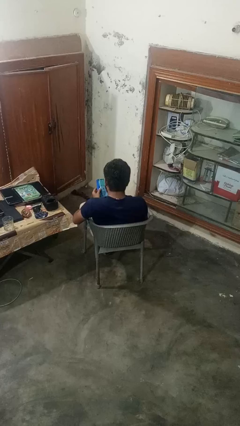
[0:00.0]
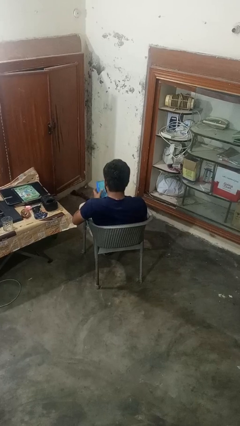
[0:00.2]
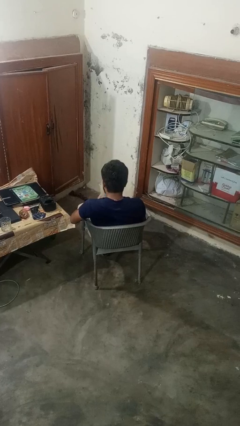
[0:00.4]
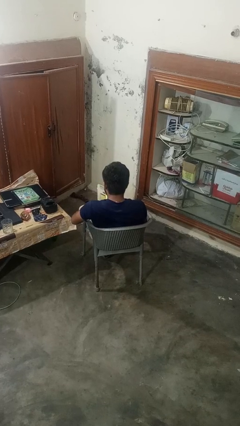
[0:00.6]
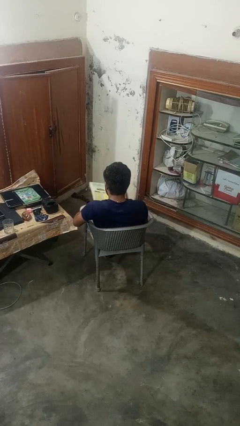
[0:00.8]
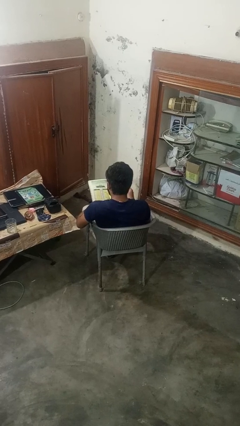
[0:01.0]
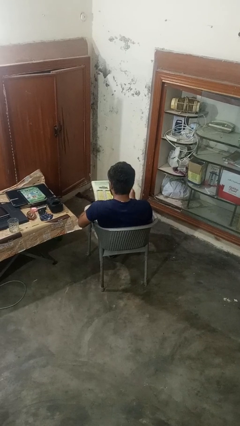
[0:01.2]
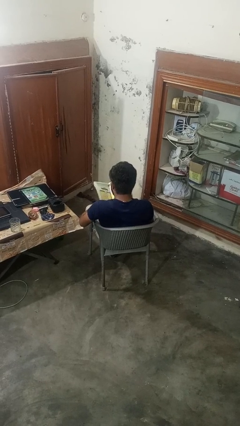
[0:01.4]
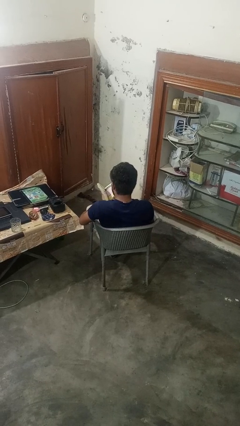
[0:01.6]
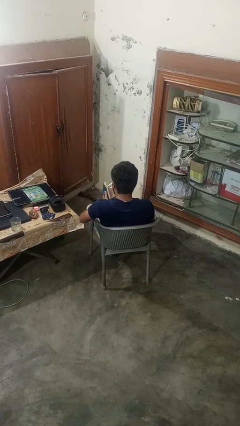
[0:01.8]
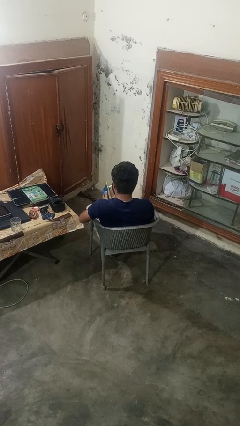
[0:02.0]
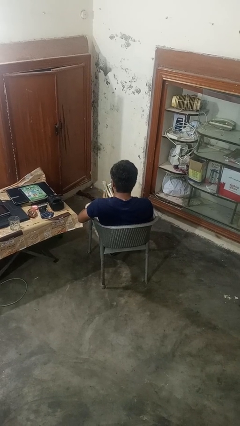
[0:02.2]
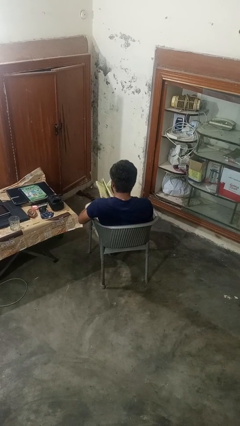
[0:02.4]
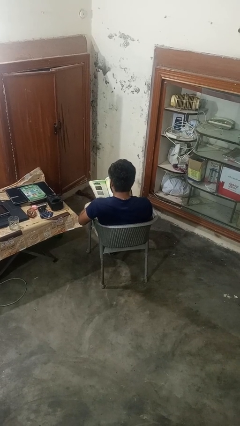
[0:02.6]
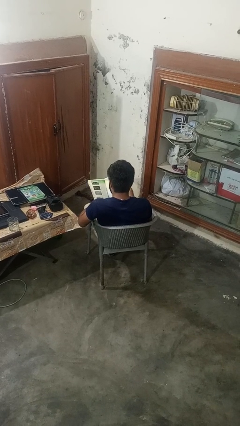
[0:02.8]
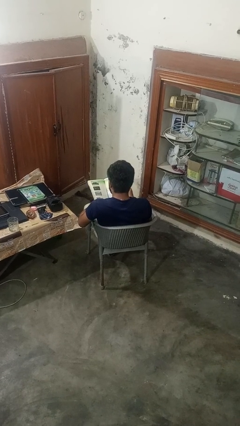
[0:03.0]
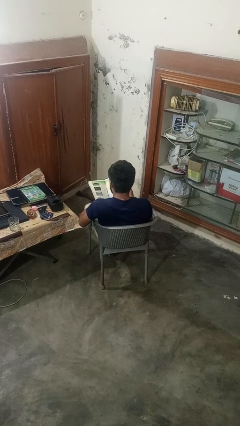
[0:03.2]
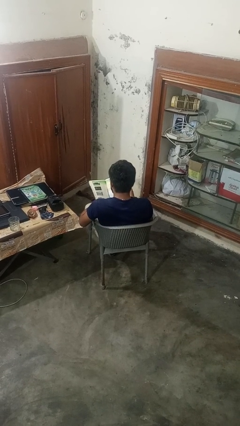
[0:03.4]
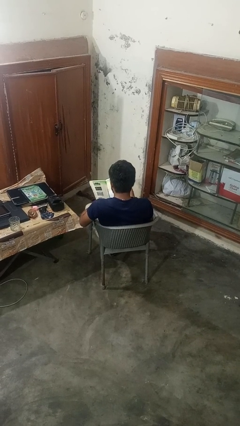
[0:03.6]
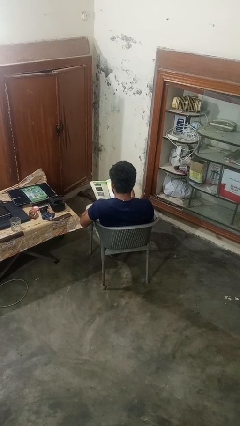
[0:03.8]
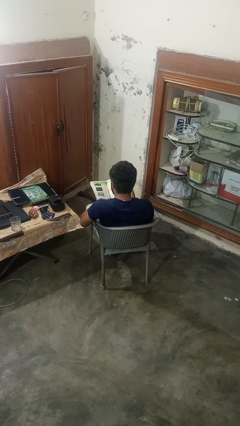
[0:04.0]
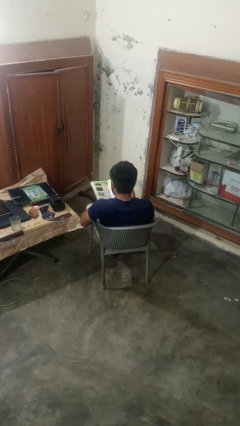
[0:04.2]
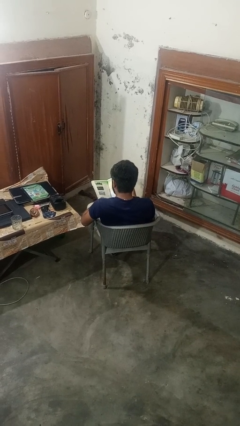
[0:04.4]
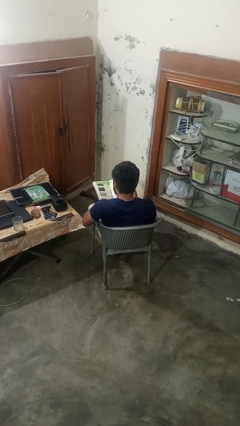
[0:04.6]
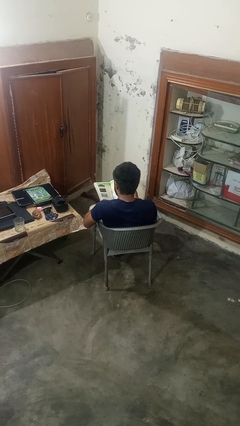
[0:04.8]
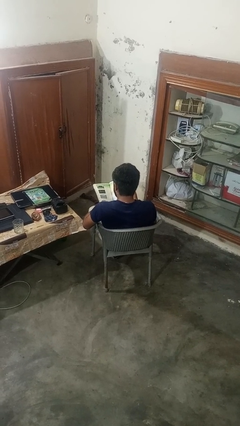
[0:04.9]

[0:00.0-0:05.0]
person reads book

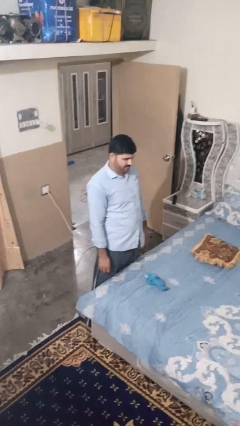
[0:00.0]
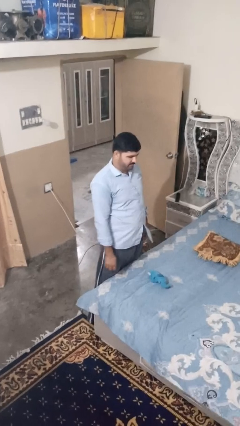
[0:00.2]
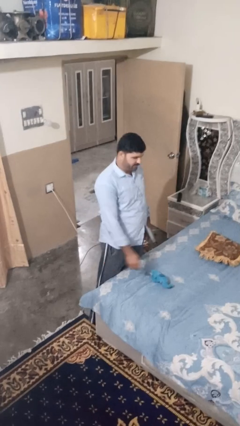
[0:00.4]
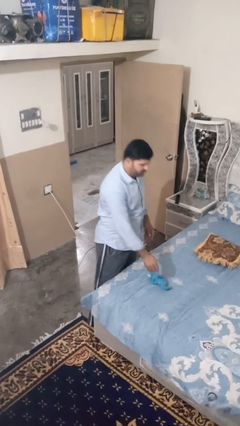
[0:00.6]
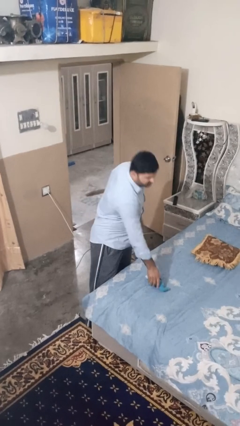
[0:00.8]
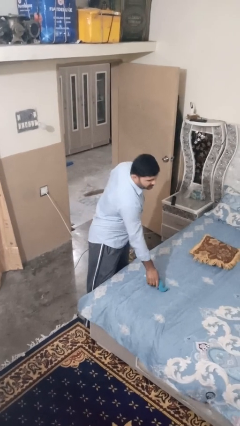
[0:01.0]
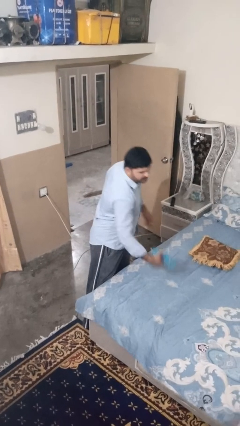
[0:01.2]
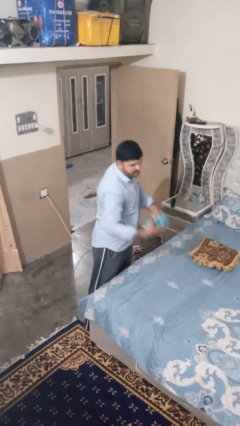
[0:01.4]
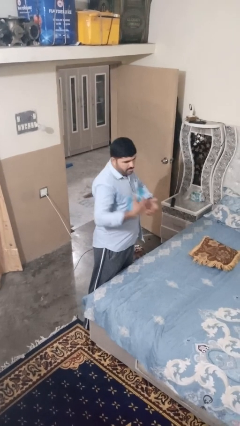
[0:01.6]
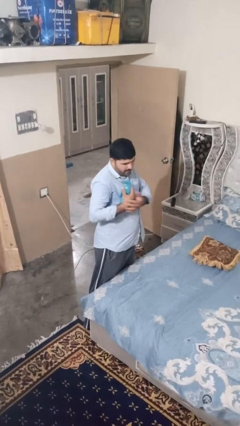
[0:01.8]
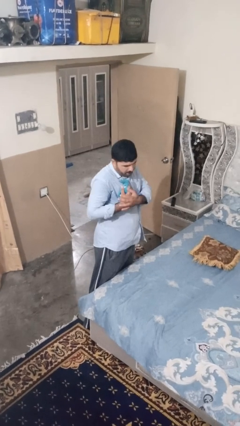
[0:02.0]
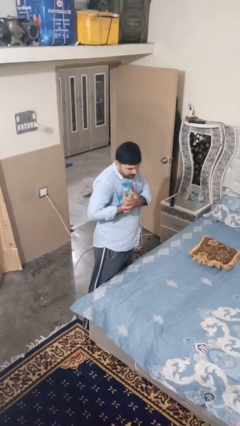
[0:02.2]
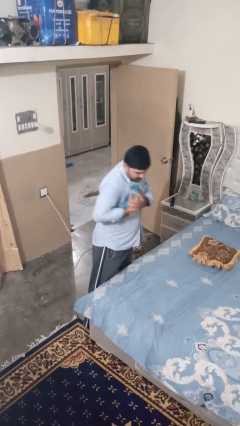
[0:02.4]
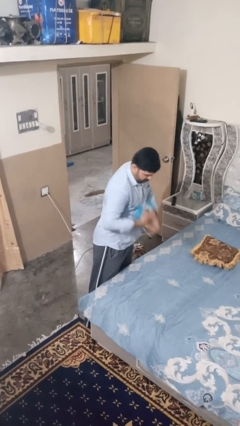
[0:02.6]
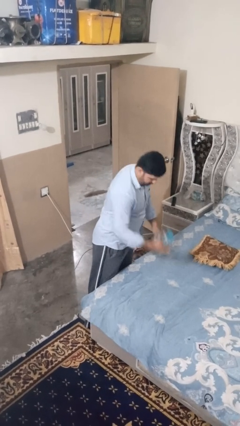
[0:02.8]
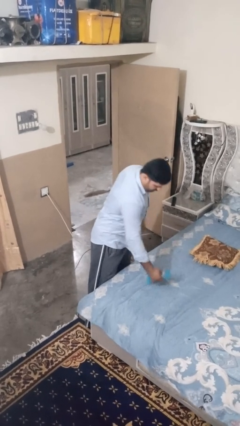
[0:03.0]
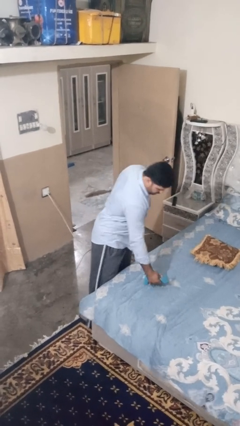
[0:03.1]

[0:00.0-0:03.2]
person hugs stuffed animal

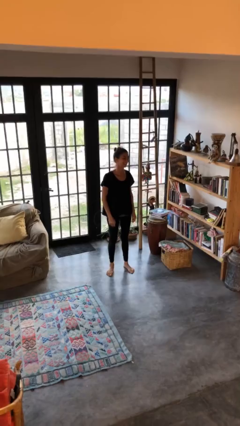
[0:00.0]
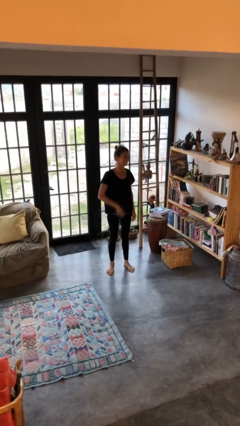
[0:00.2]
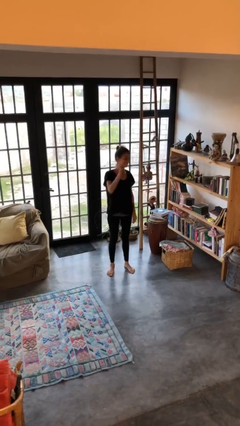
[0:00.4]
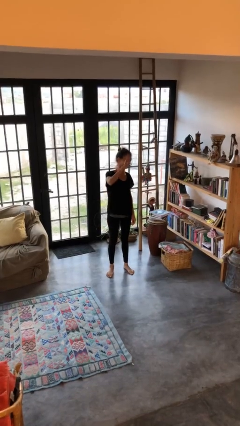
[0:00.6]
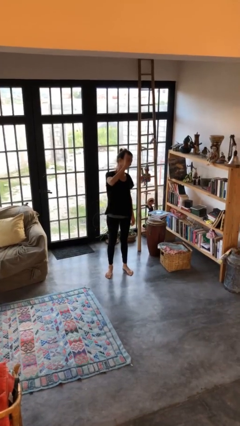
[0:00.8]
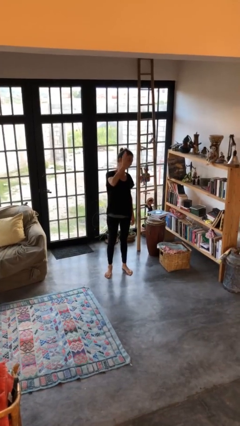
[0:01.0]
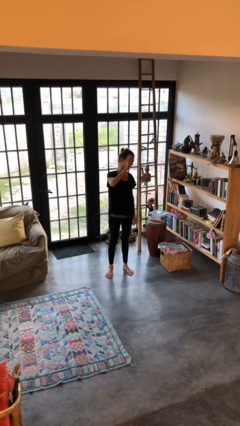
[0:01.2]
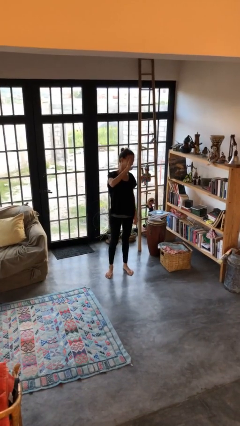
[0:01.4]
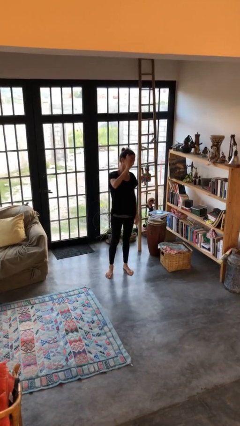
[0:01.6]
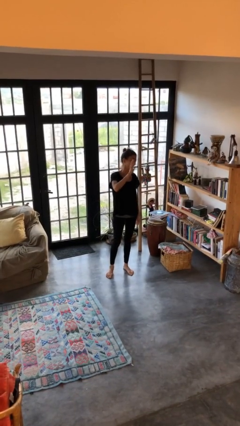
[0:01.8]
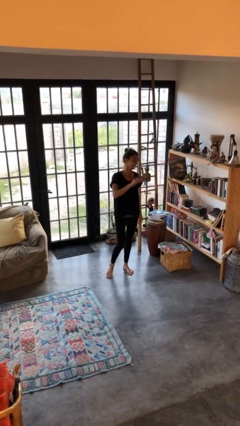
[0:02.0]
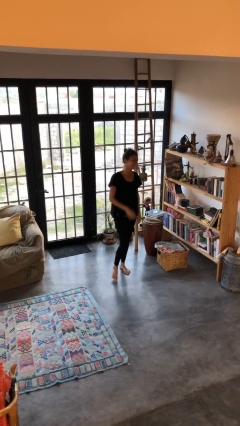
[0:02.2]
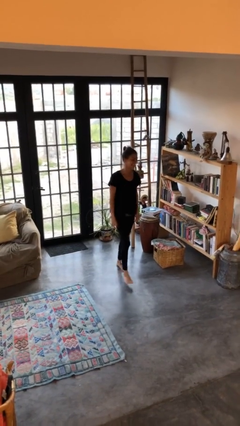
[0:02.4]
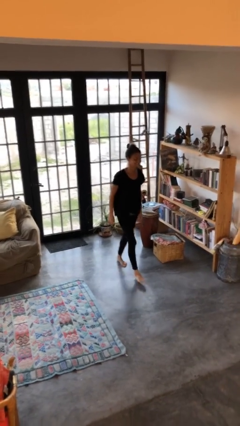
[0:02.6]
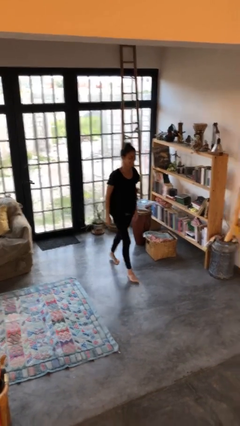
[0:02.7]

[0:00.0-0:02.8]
person waves at person

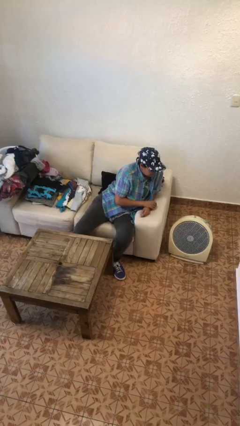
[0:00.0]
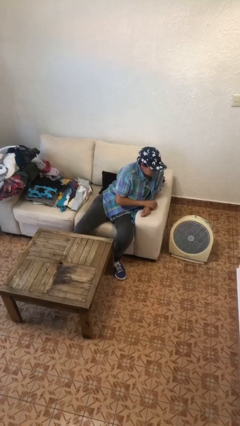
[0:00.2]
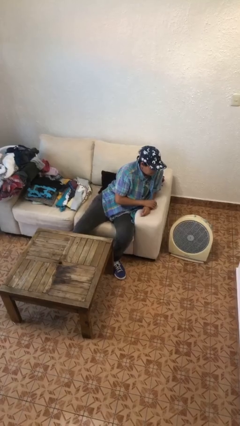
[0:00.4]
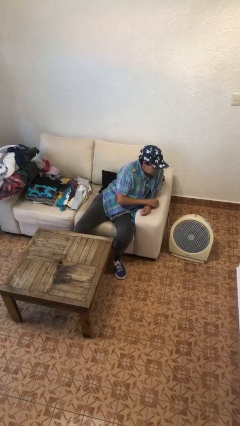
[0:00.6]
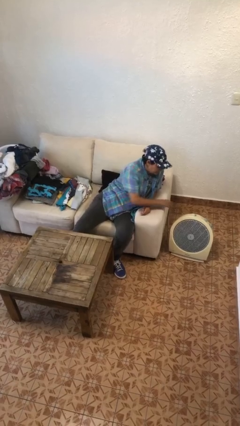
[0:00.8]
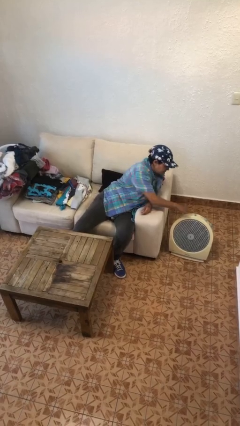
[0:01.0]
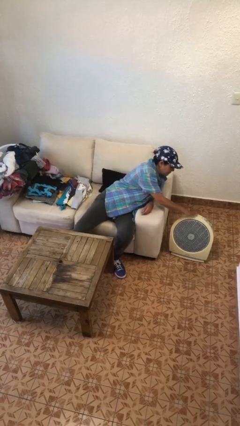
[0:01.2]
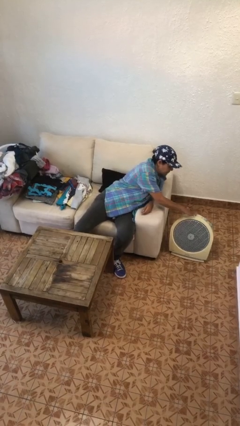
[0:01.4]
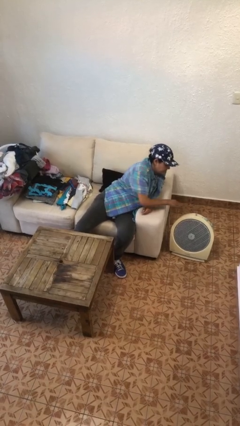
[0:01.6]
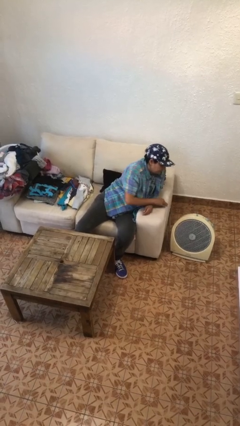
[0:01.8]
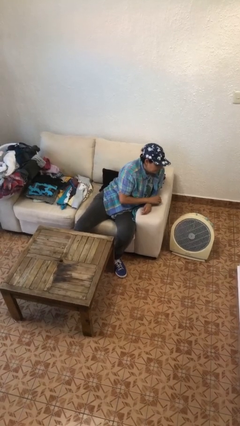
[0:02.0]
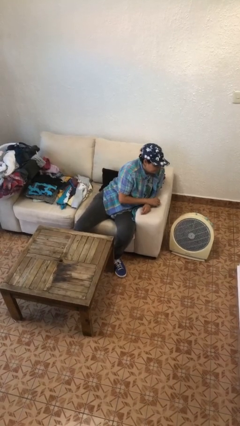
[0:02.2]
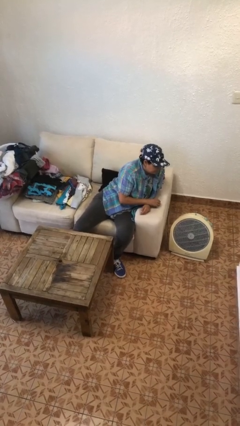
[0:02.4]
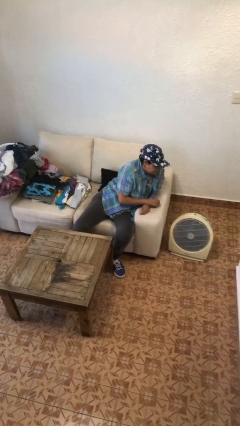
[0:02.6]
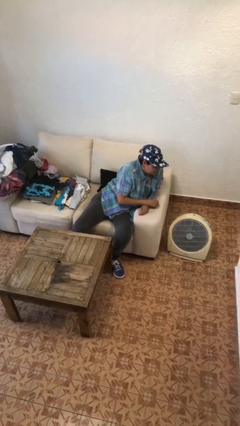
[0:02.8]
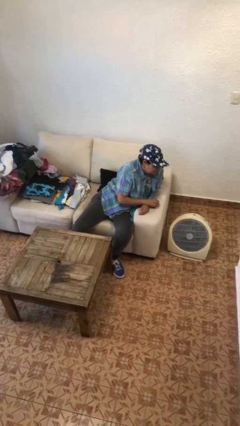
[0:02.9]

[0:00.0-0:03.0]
person turns on fan

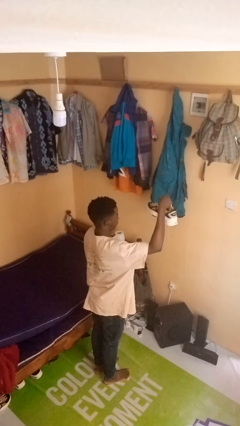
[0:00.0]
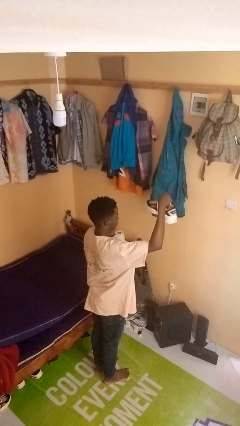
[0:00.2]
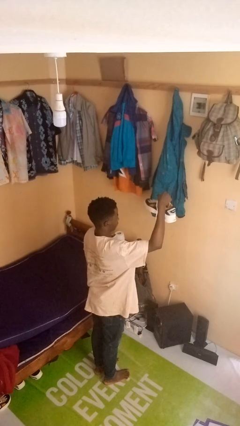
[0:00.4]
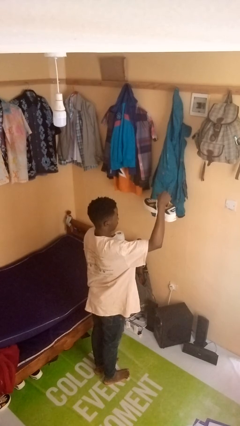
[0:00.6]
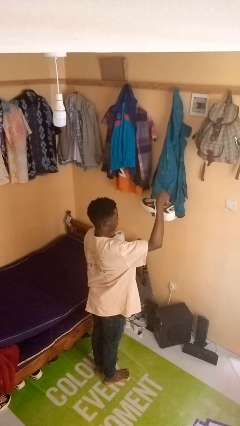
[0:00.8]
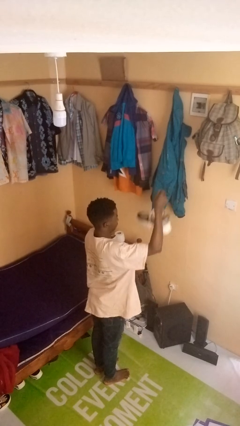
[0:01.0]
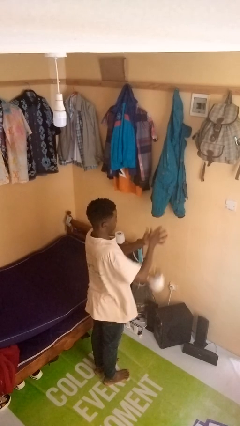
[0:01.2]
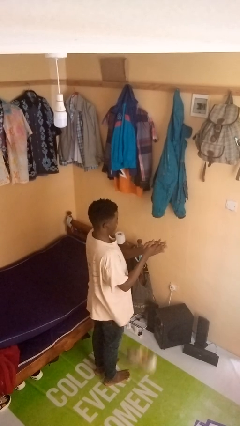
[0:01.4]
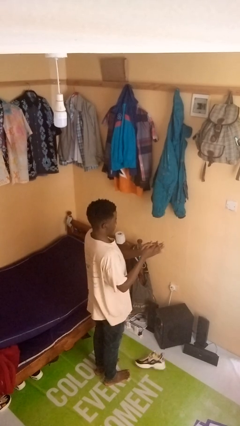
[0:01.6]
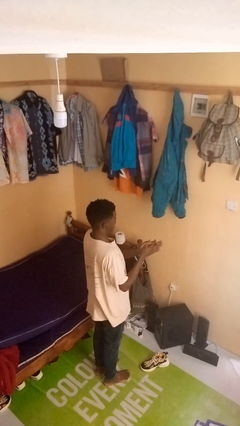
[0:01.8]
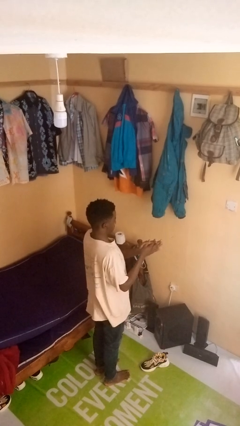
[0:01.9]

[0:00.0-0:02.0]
person drops object

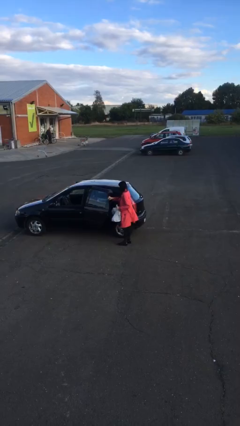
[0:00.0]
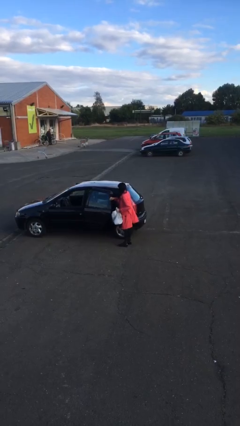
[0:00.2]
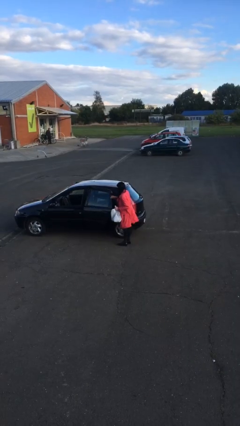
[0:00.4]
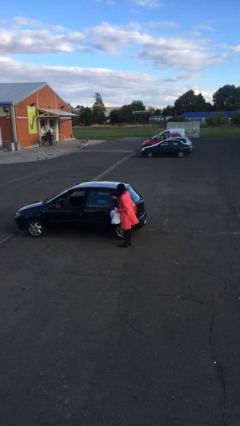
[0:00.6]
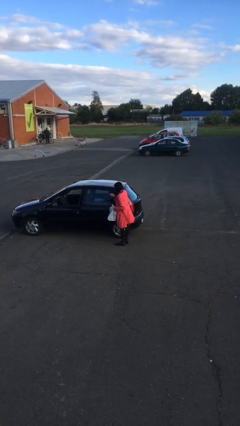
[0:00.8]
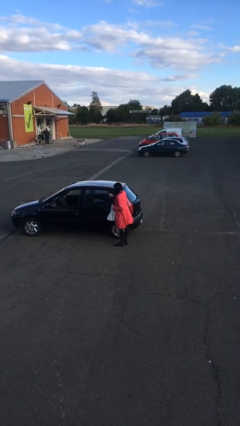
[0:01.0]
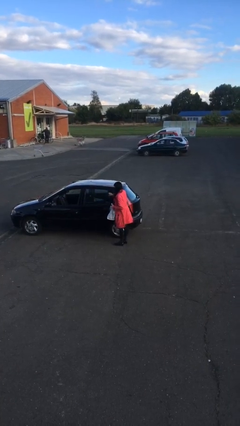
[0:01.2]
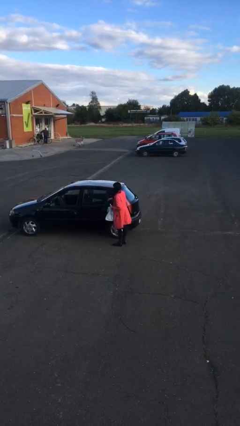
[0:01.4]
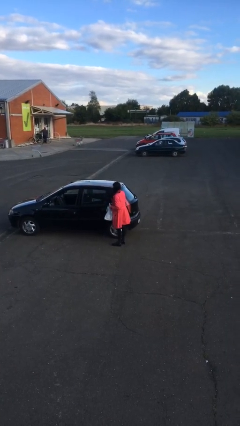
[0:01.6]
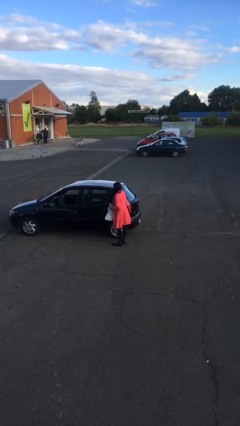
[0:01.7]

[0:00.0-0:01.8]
person closes car door
